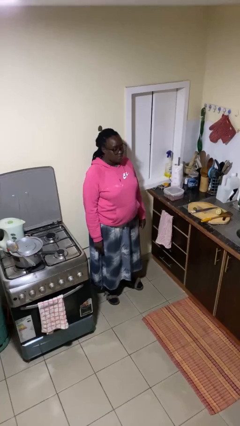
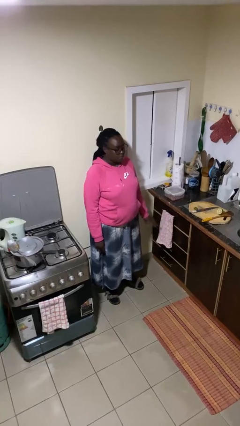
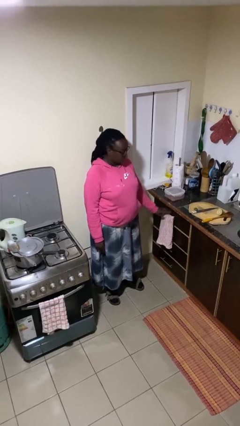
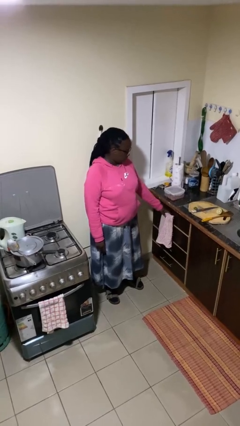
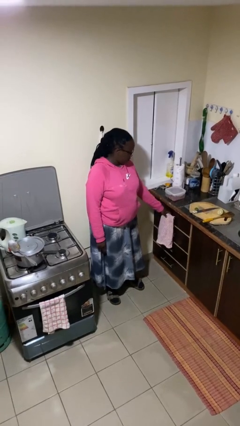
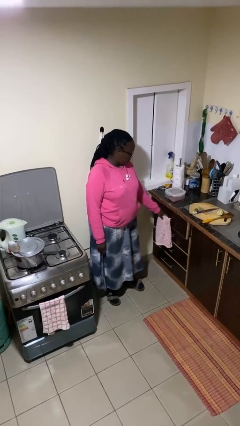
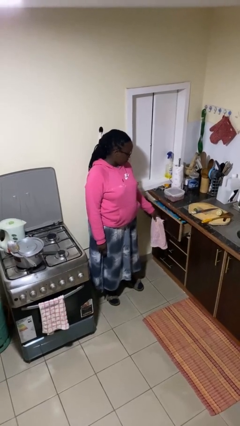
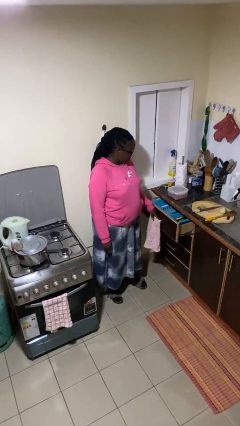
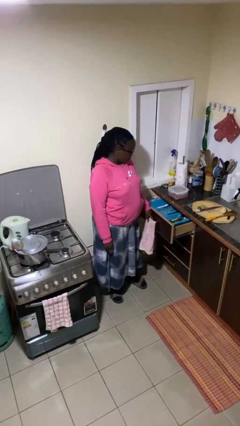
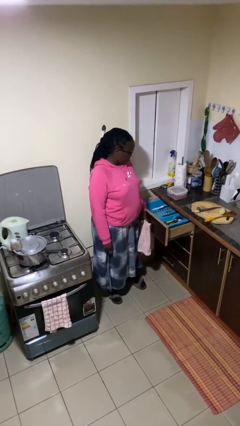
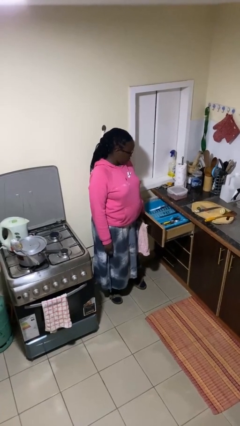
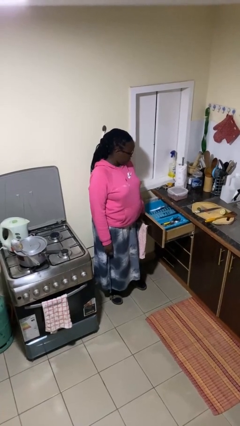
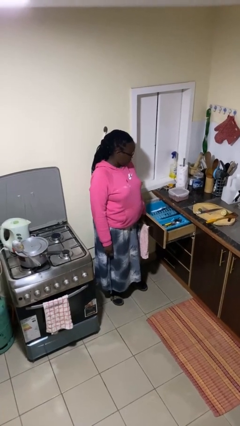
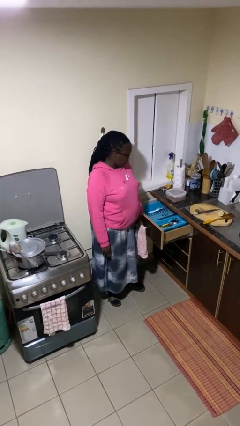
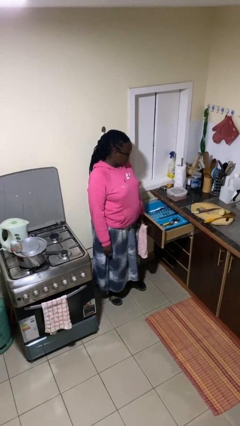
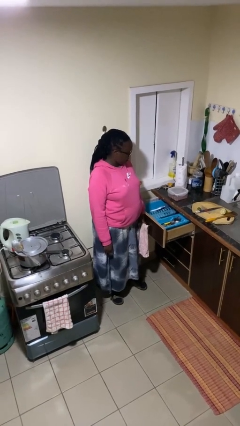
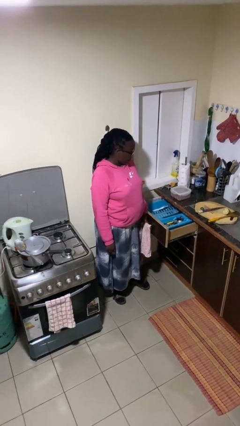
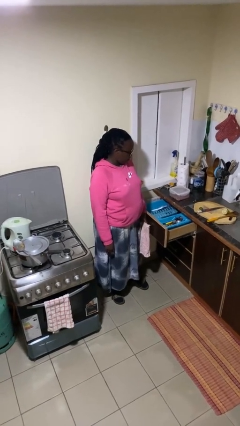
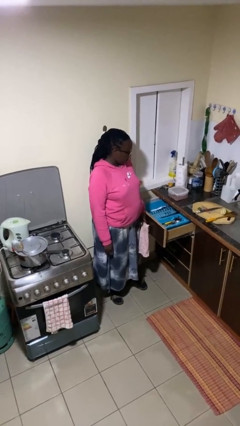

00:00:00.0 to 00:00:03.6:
person opens kitchen drawer

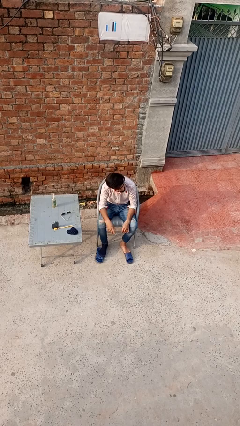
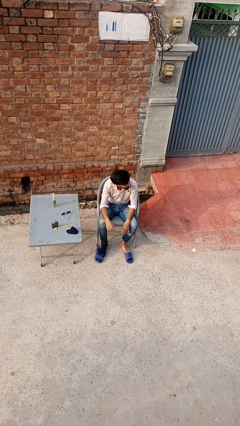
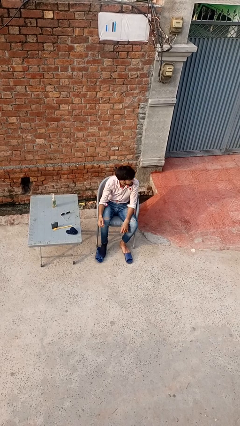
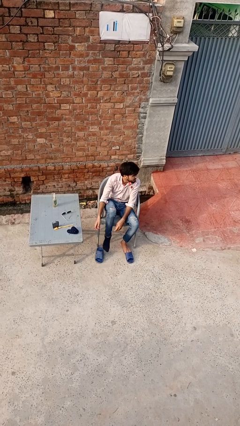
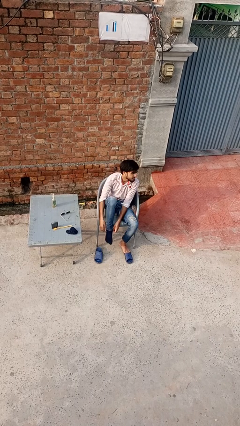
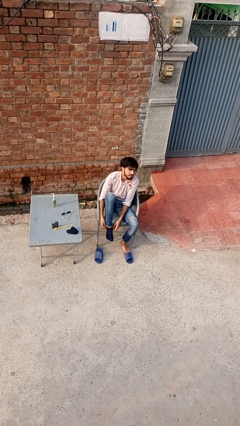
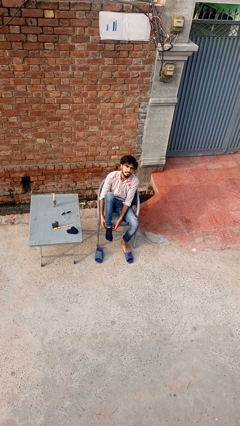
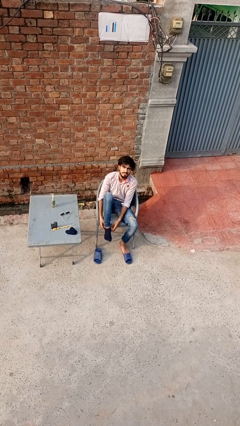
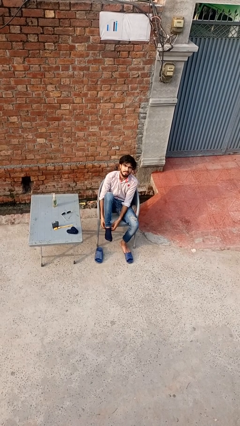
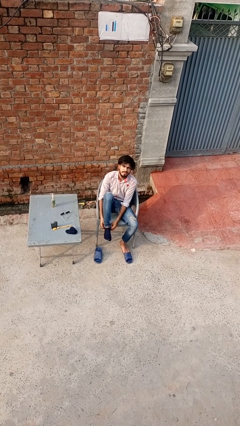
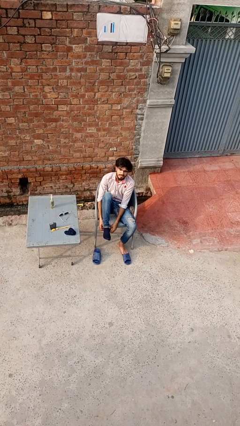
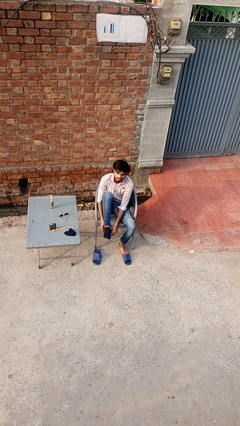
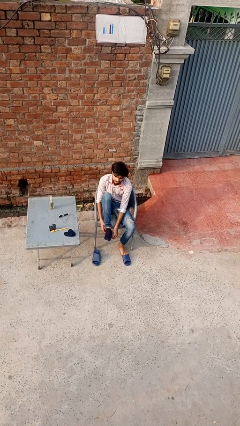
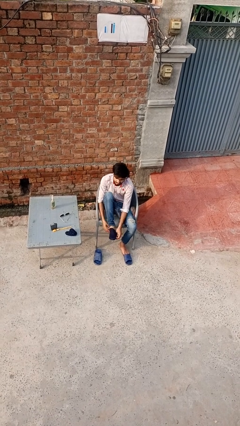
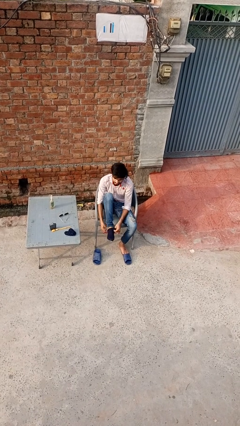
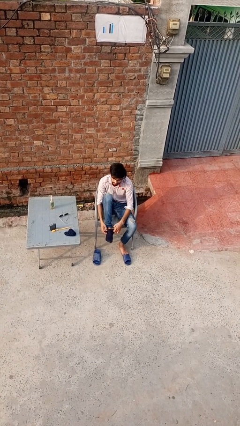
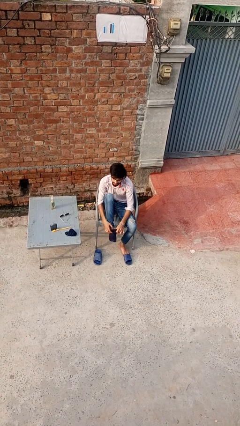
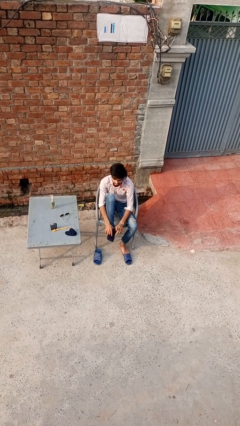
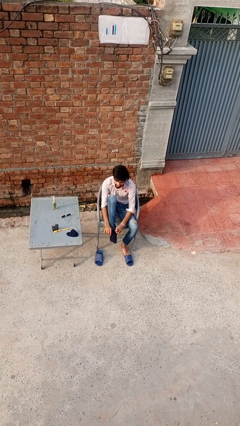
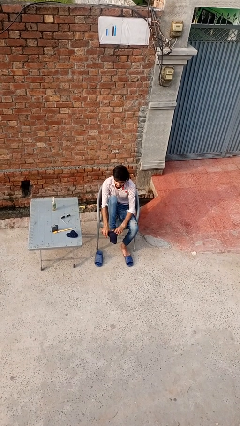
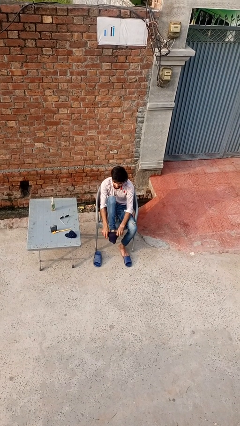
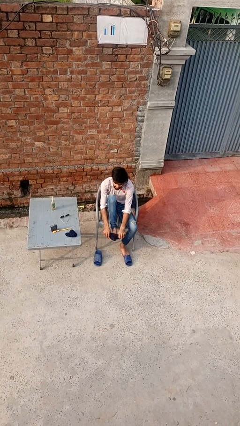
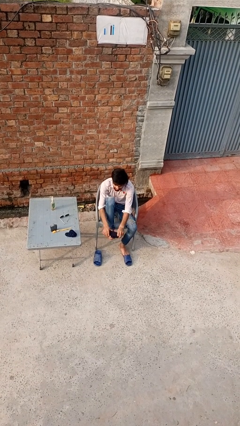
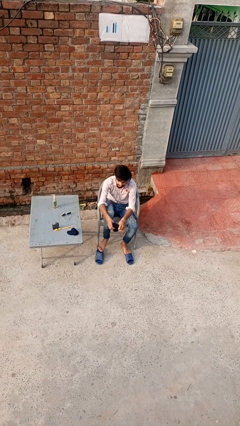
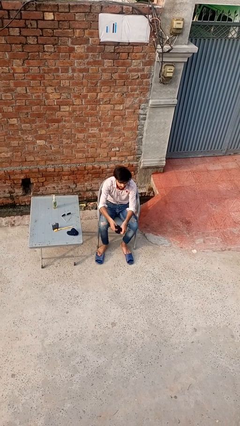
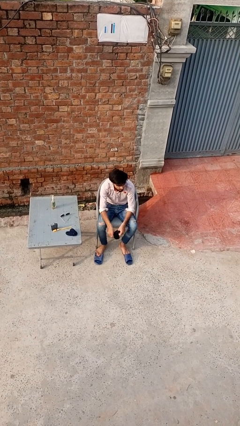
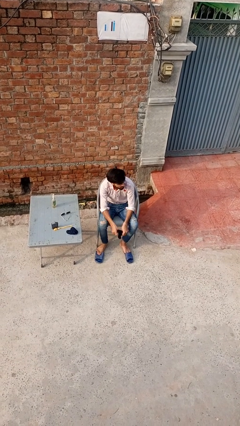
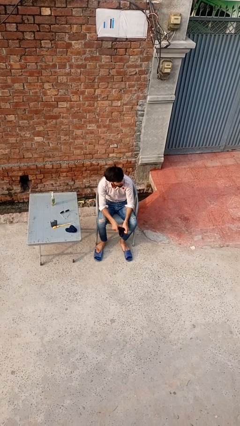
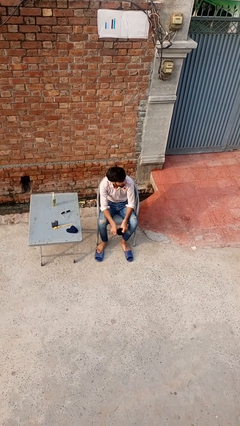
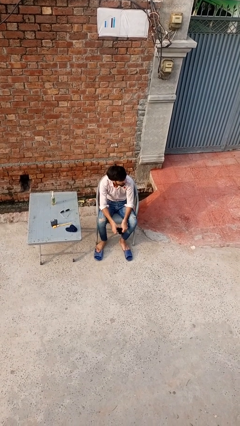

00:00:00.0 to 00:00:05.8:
person takes off socks

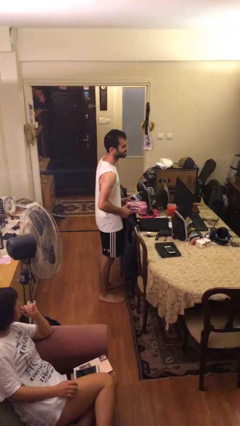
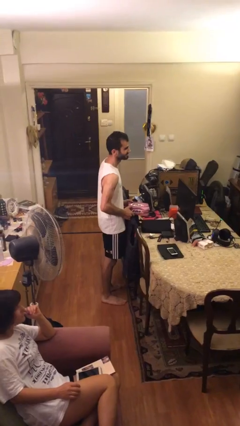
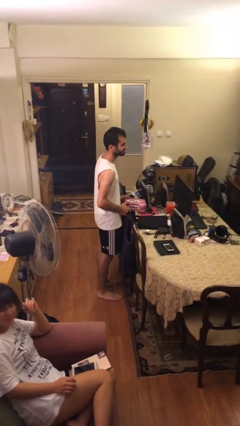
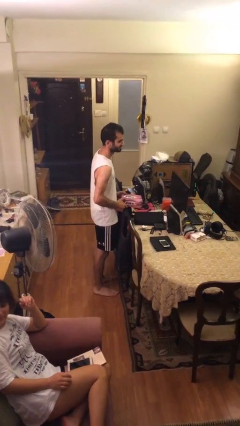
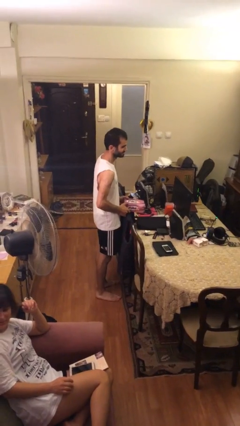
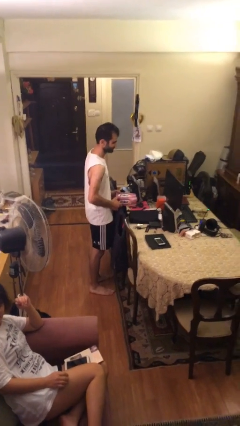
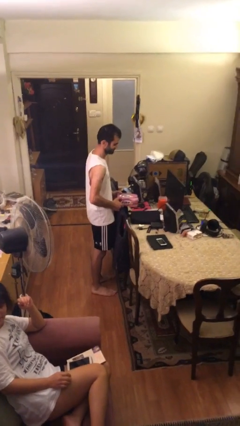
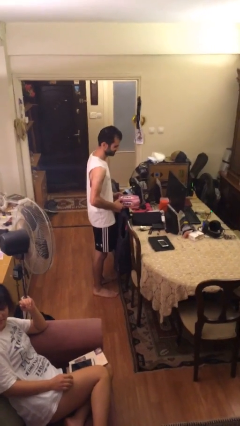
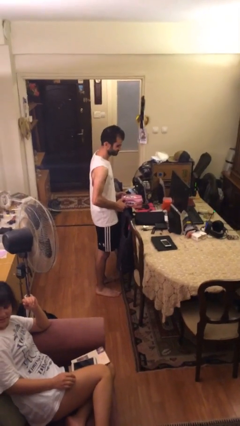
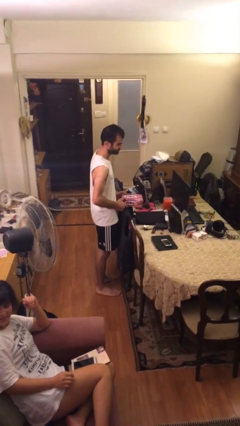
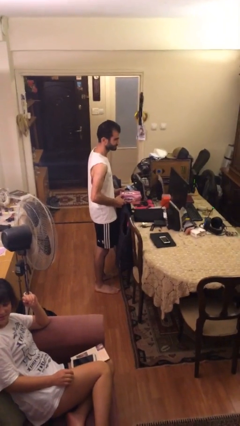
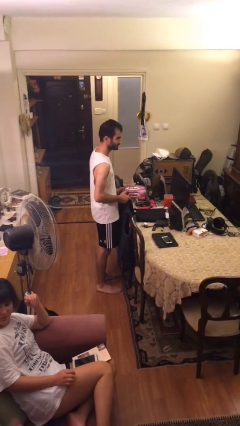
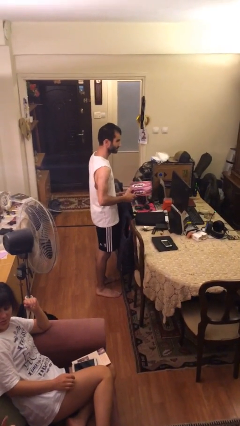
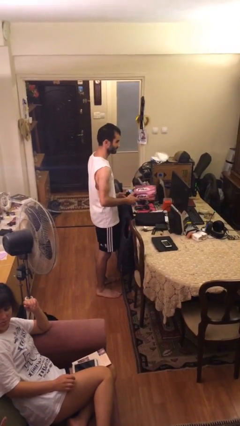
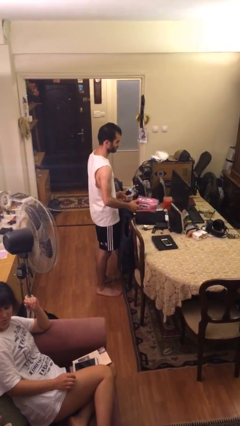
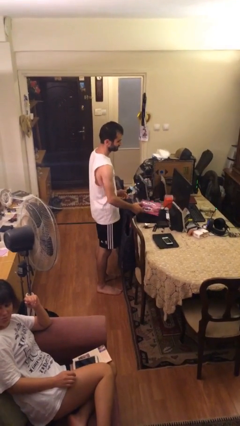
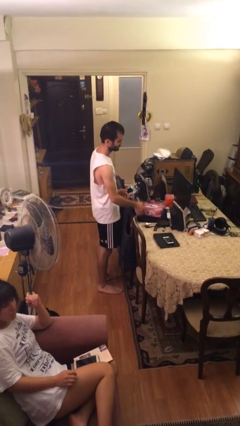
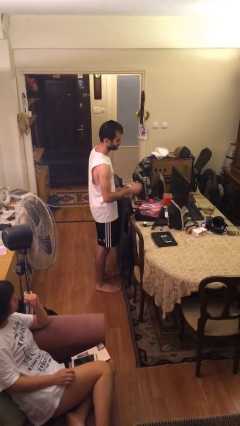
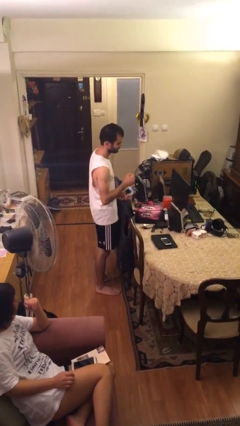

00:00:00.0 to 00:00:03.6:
person puts down object on table

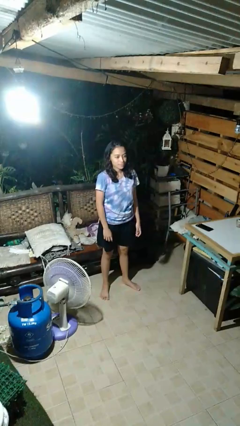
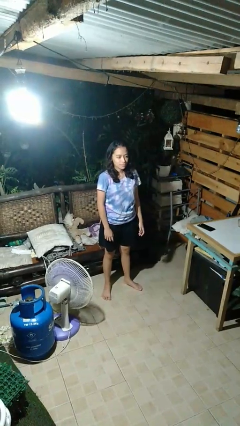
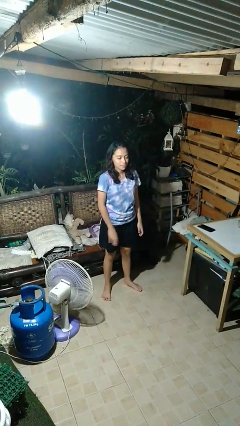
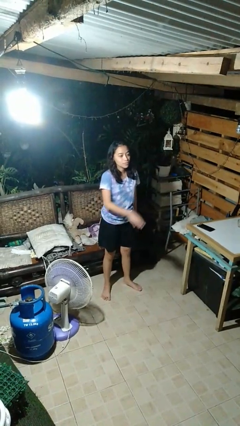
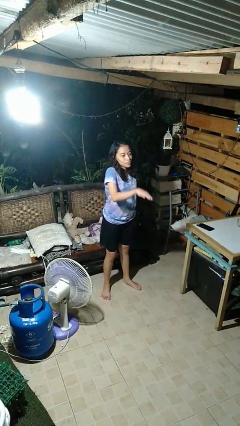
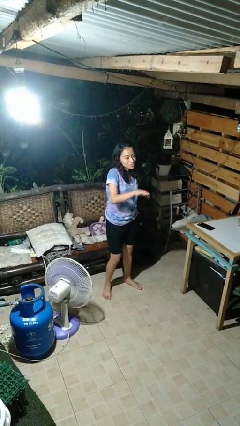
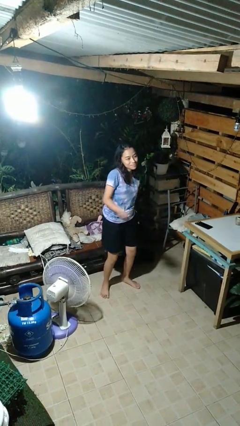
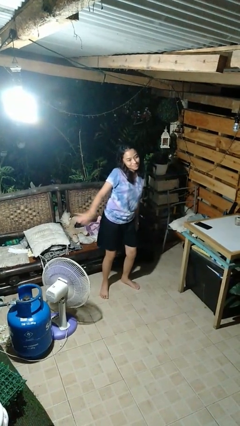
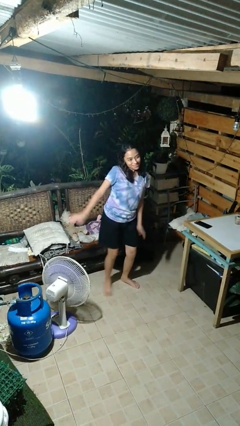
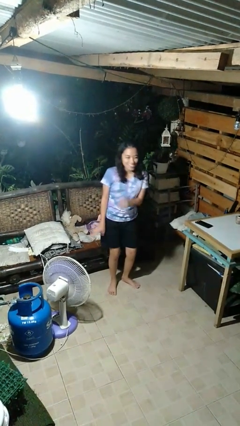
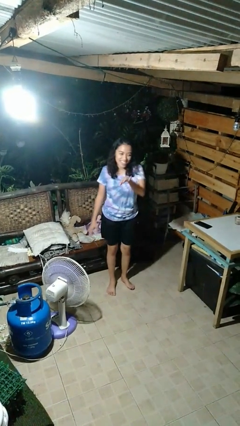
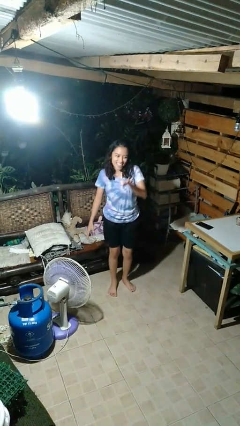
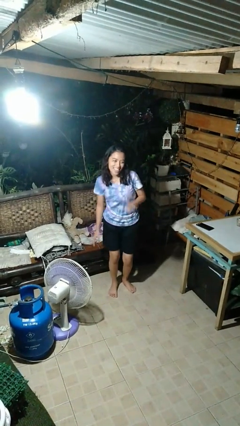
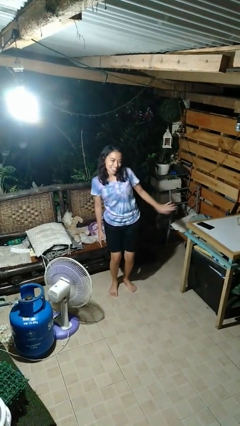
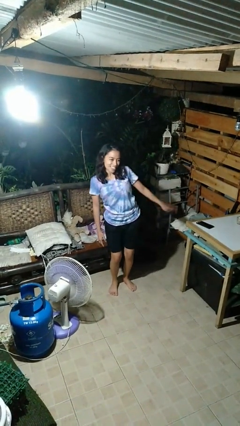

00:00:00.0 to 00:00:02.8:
person dances in place

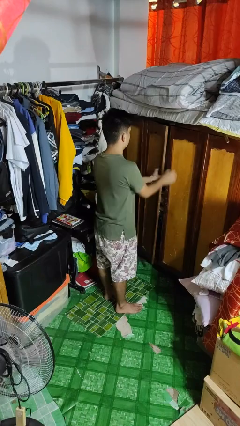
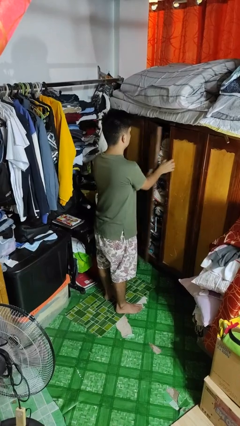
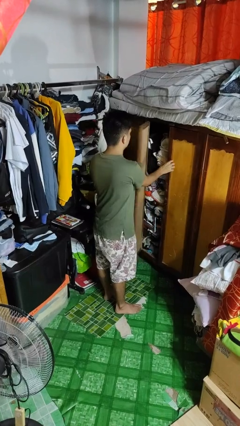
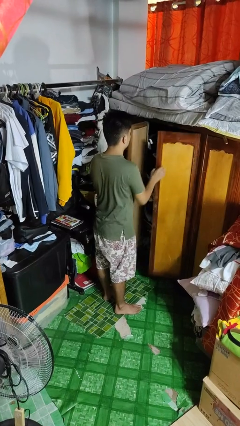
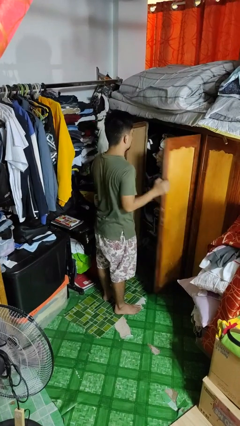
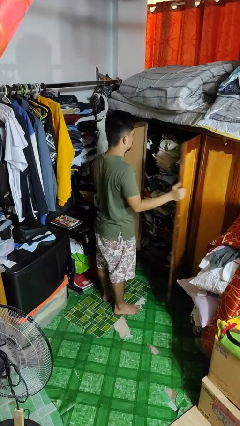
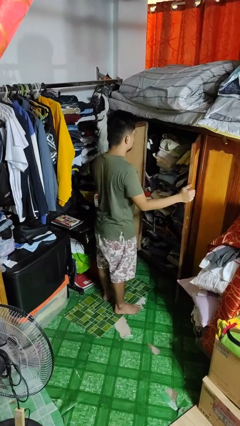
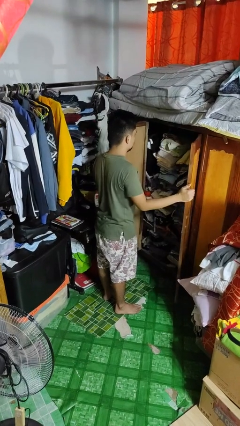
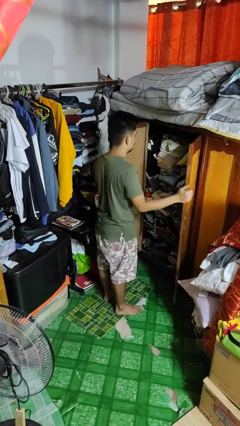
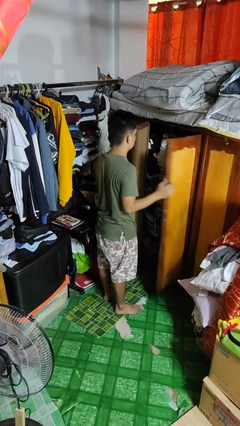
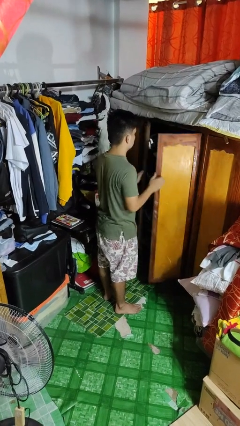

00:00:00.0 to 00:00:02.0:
person opens closet door
